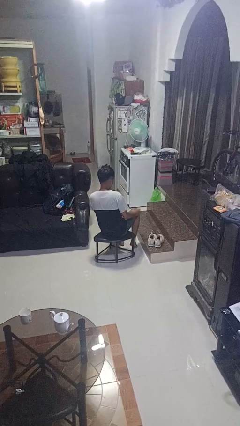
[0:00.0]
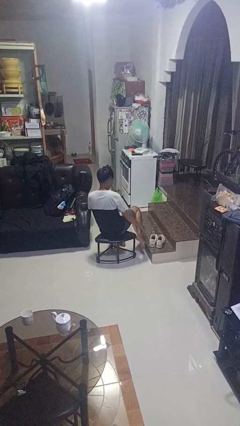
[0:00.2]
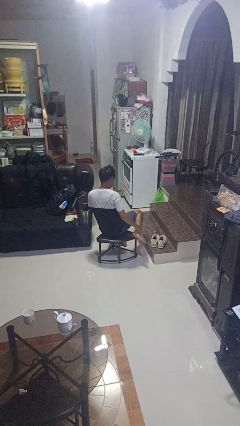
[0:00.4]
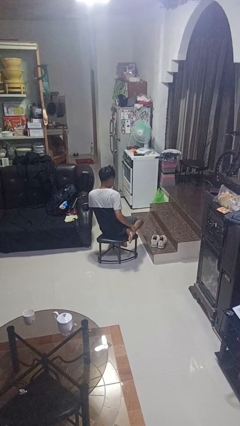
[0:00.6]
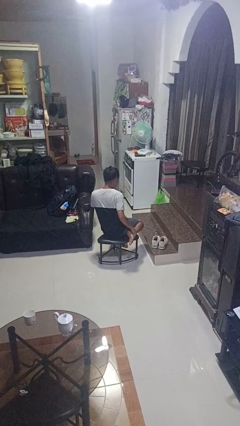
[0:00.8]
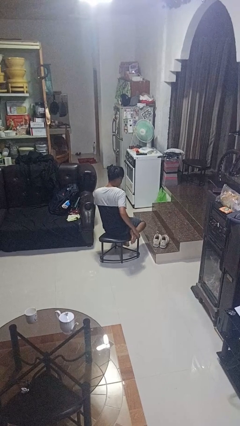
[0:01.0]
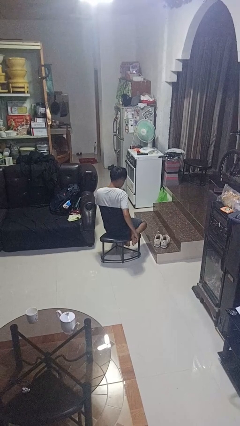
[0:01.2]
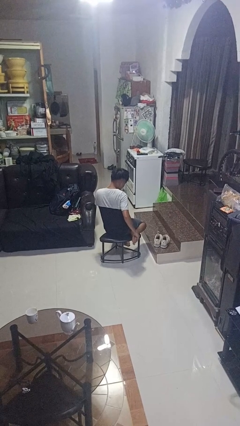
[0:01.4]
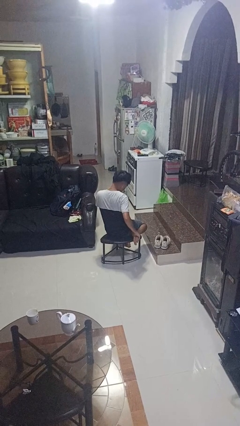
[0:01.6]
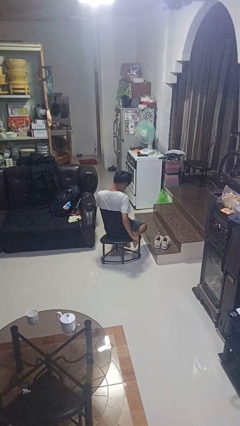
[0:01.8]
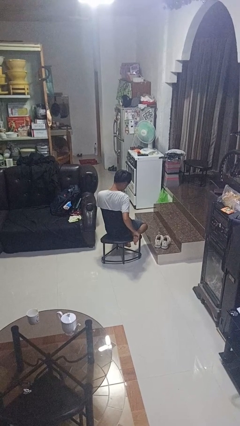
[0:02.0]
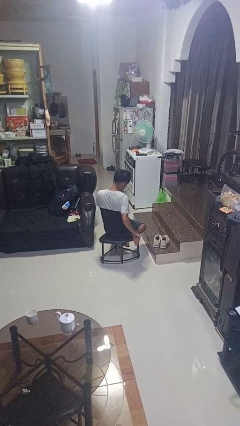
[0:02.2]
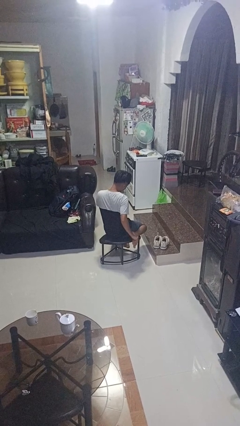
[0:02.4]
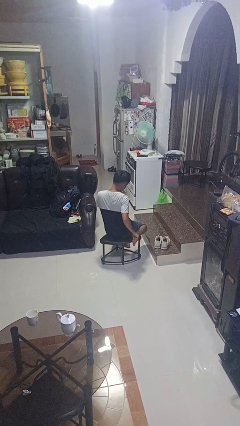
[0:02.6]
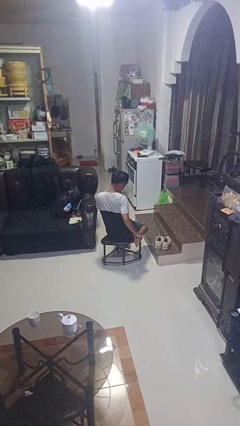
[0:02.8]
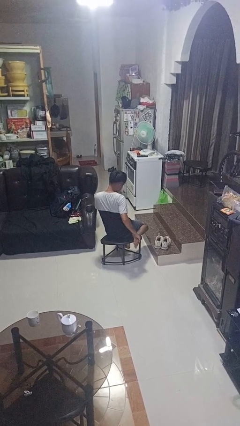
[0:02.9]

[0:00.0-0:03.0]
person rubs foot

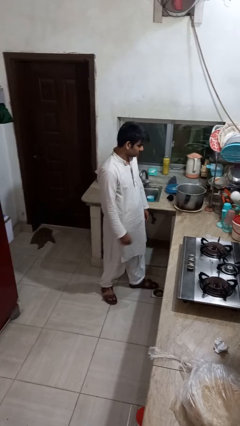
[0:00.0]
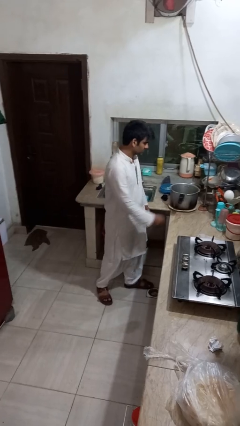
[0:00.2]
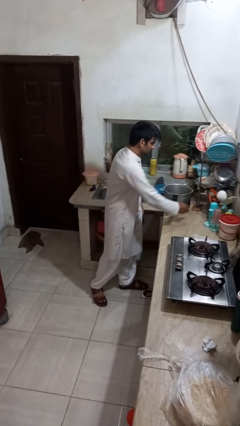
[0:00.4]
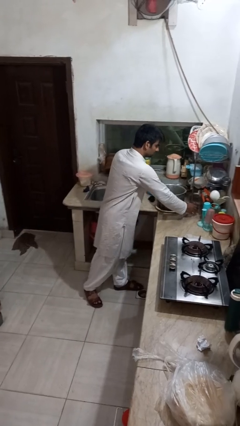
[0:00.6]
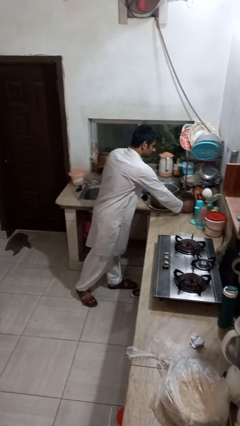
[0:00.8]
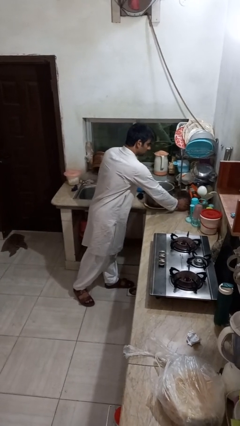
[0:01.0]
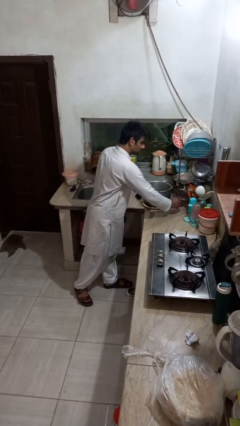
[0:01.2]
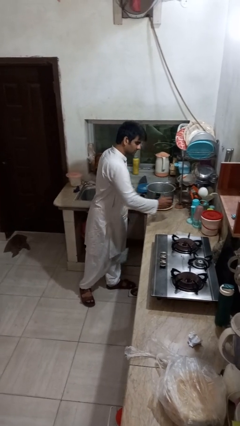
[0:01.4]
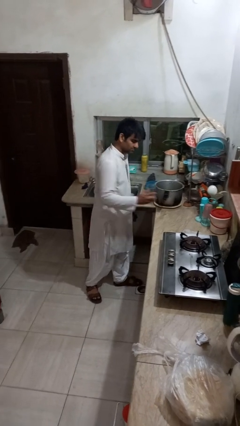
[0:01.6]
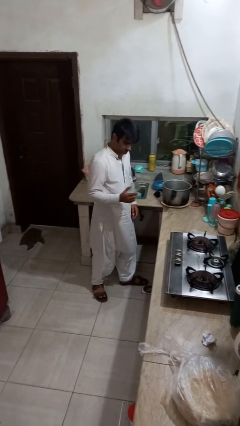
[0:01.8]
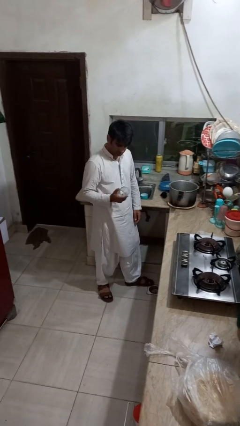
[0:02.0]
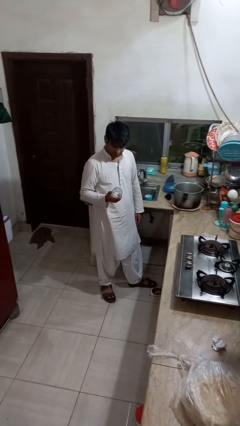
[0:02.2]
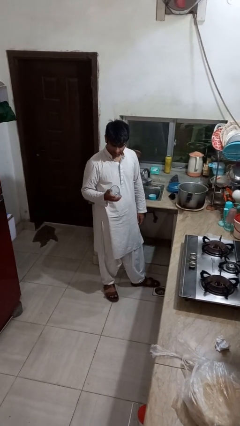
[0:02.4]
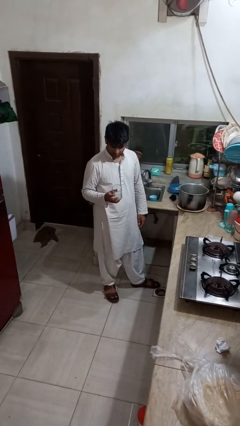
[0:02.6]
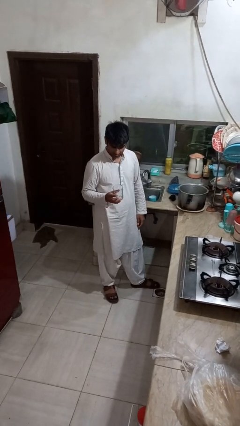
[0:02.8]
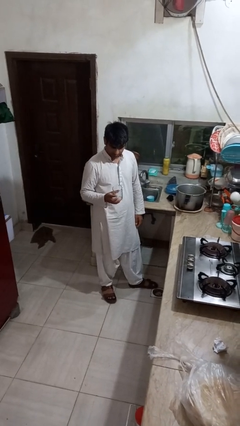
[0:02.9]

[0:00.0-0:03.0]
person picks up object from countertop

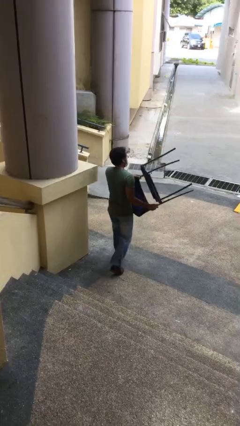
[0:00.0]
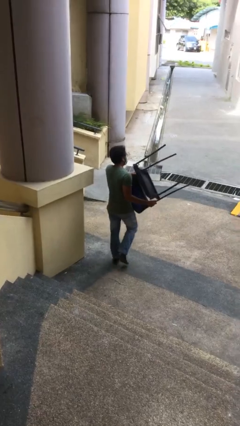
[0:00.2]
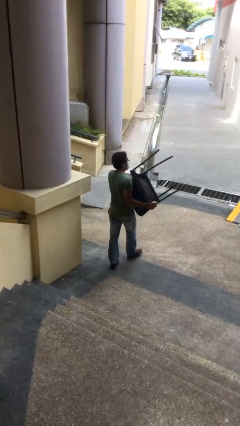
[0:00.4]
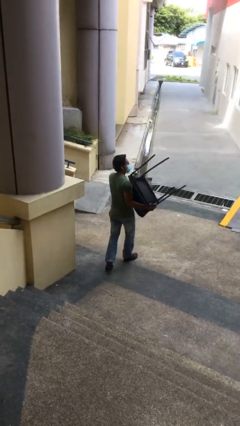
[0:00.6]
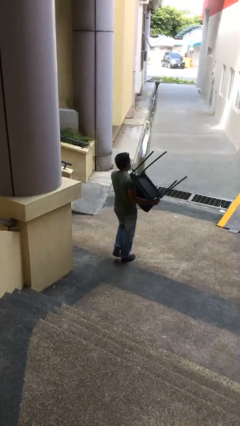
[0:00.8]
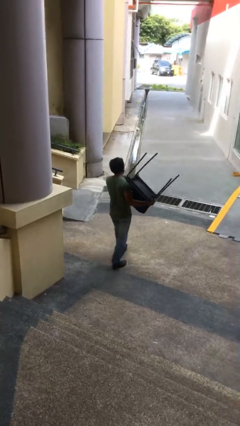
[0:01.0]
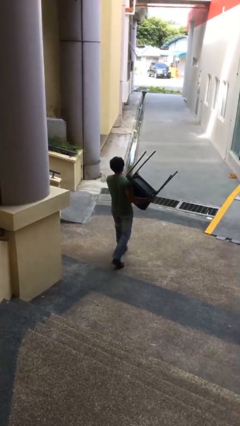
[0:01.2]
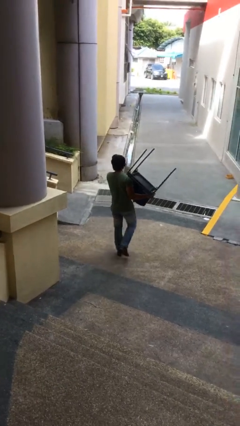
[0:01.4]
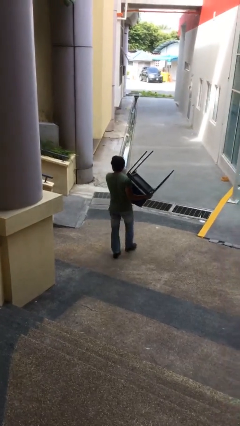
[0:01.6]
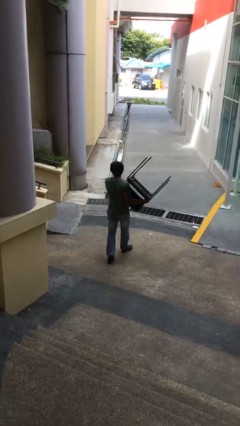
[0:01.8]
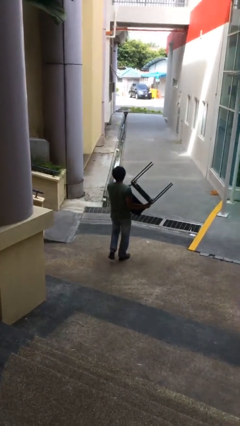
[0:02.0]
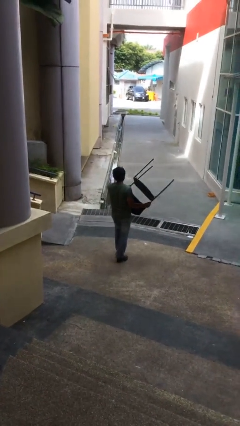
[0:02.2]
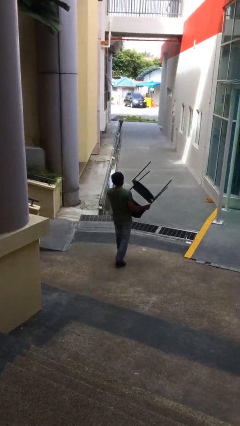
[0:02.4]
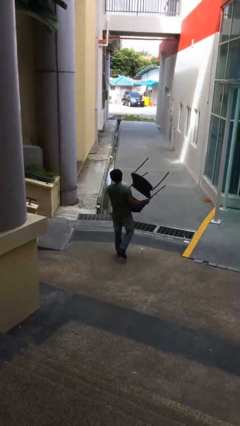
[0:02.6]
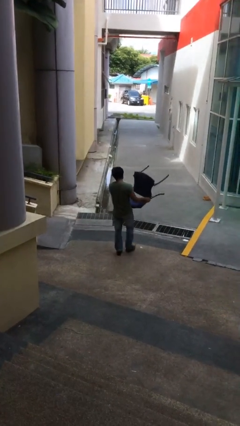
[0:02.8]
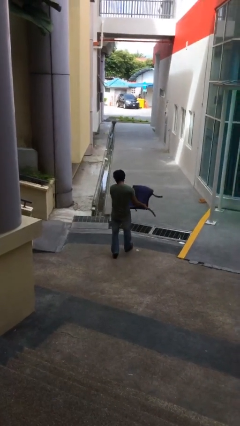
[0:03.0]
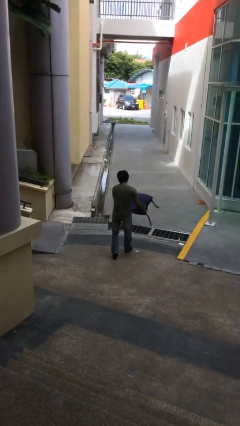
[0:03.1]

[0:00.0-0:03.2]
person carries heavy object

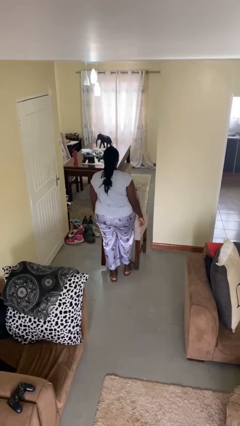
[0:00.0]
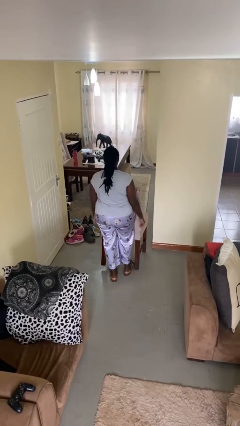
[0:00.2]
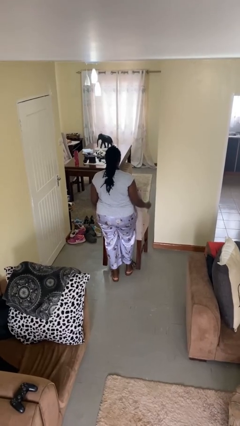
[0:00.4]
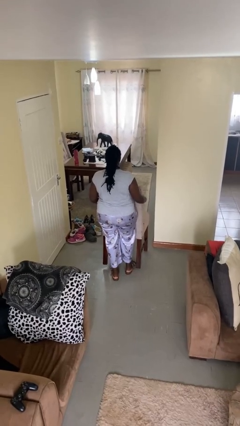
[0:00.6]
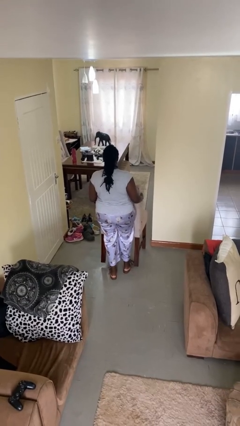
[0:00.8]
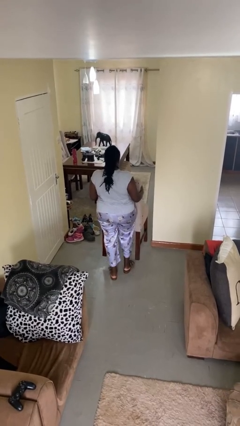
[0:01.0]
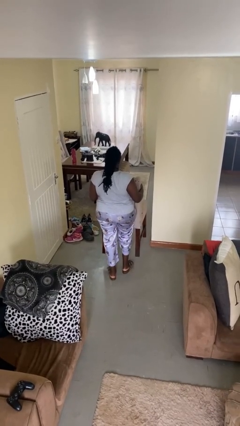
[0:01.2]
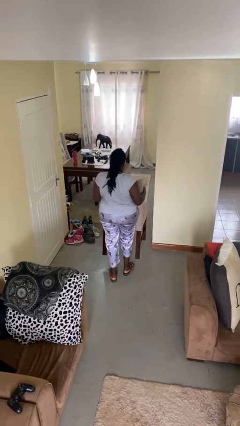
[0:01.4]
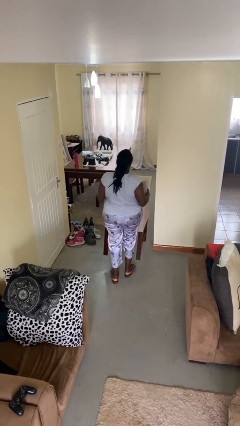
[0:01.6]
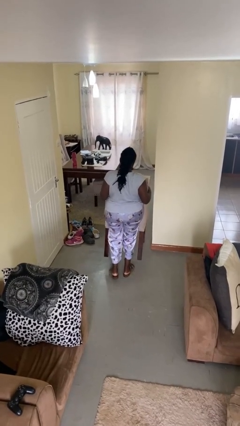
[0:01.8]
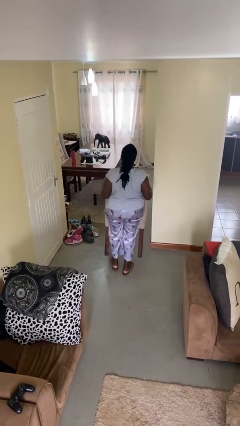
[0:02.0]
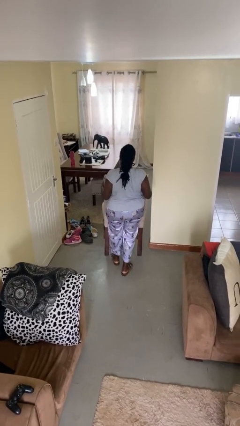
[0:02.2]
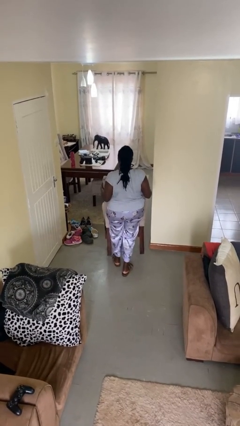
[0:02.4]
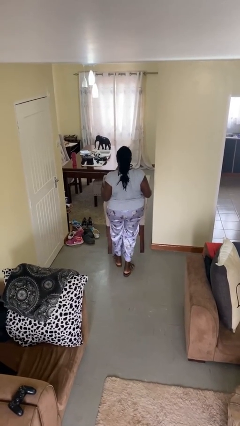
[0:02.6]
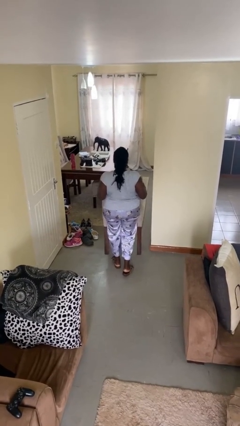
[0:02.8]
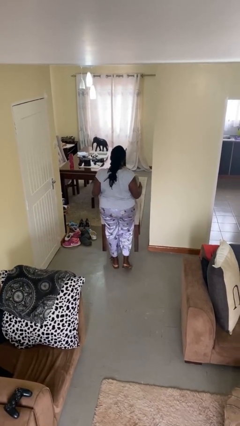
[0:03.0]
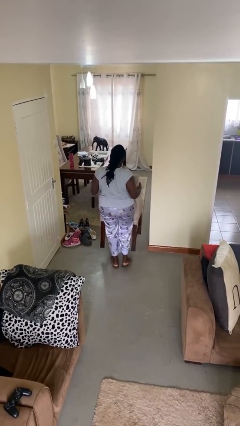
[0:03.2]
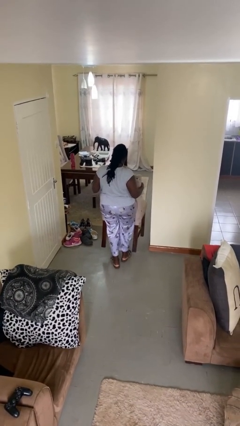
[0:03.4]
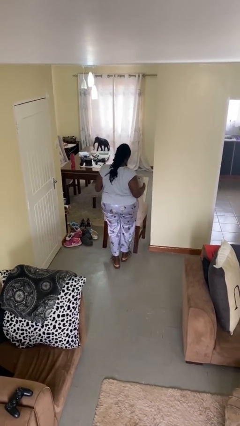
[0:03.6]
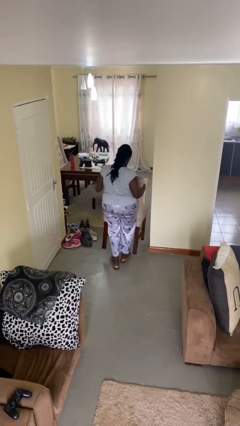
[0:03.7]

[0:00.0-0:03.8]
person carries furniture

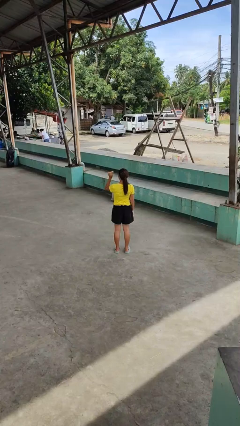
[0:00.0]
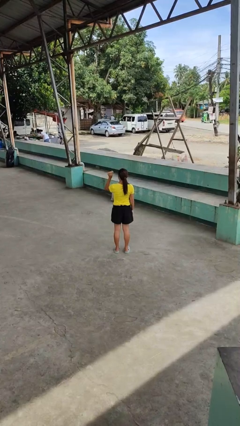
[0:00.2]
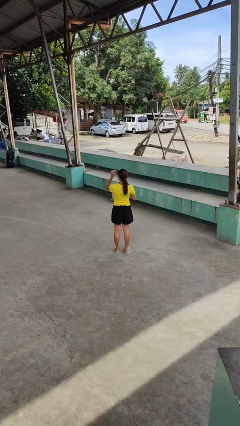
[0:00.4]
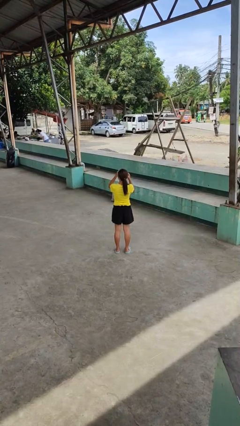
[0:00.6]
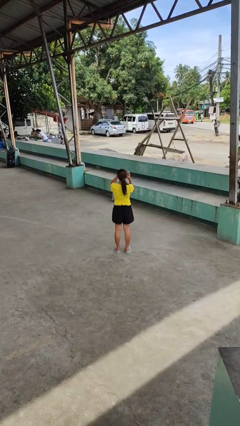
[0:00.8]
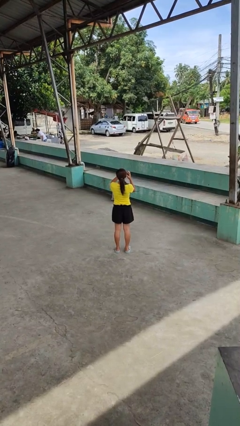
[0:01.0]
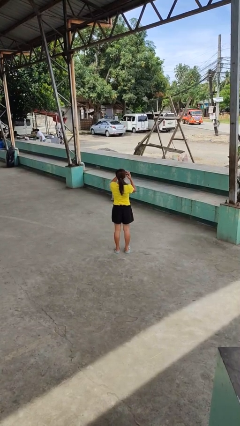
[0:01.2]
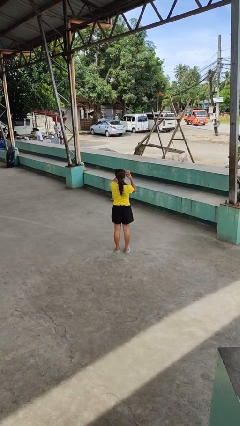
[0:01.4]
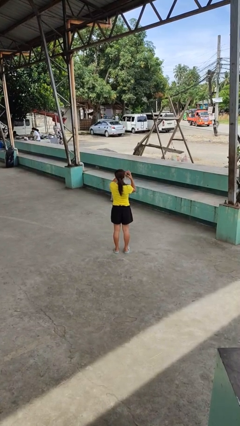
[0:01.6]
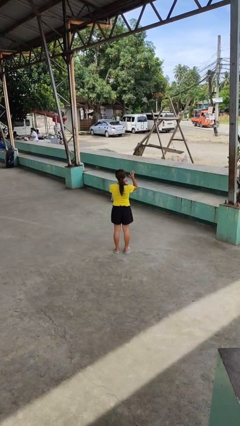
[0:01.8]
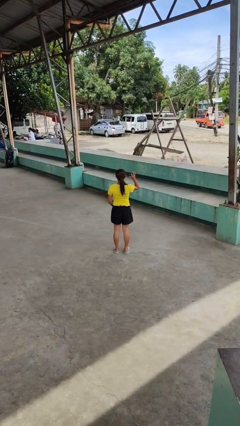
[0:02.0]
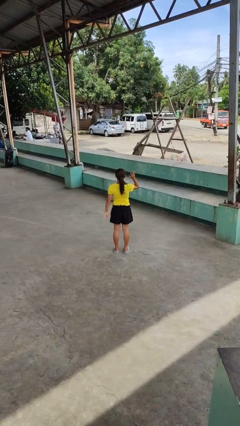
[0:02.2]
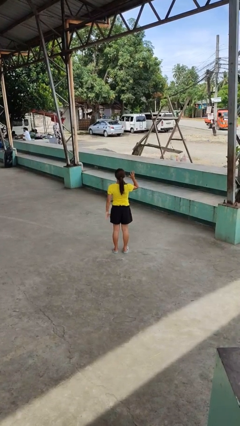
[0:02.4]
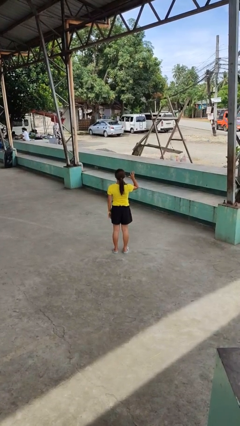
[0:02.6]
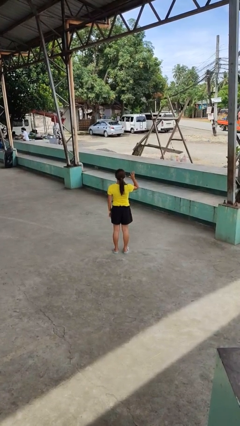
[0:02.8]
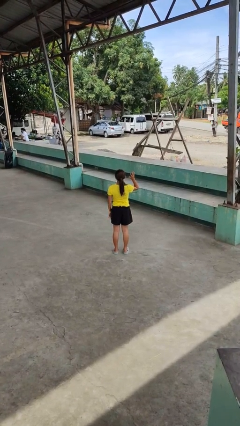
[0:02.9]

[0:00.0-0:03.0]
person puts on ring

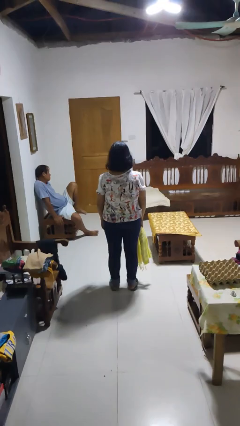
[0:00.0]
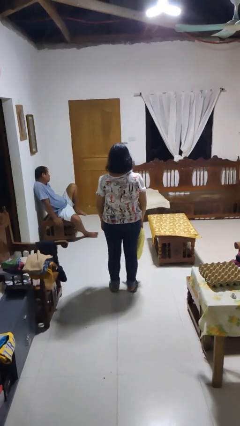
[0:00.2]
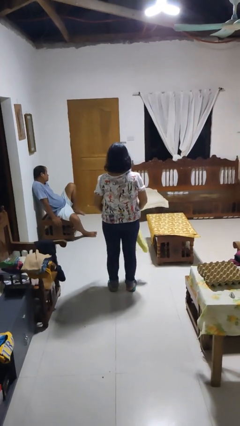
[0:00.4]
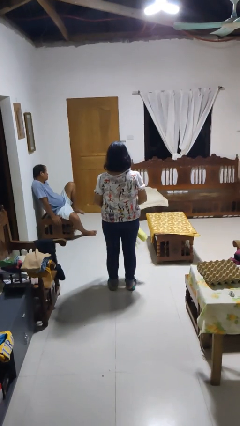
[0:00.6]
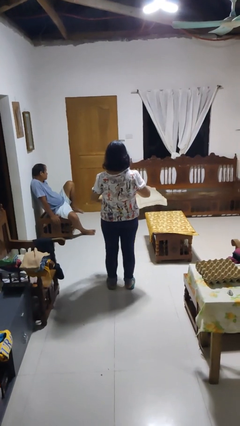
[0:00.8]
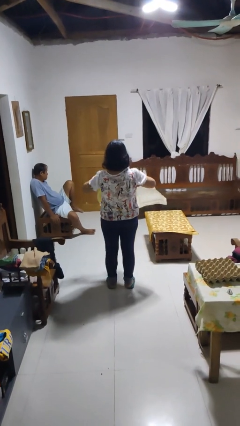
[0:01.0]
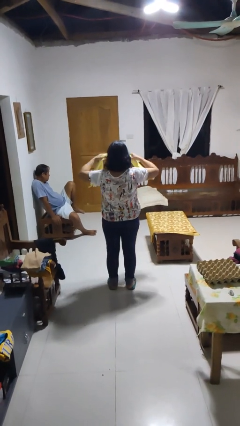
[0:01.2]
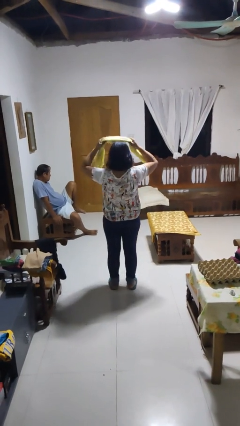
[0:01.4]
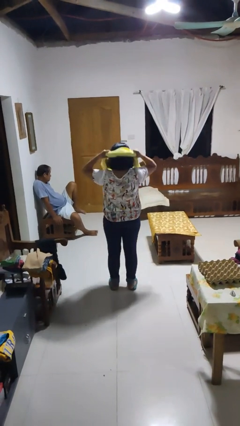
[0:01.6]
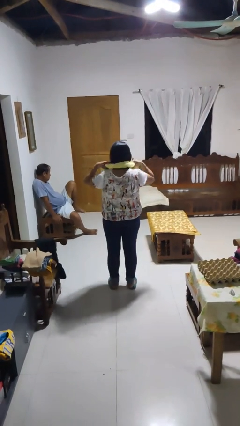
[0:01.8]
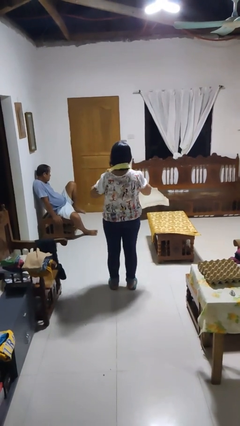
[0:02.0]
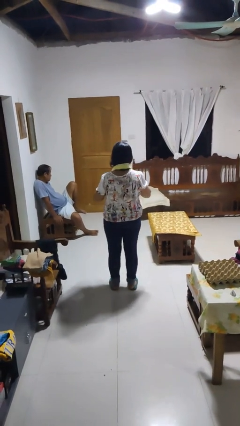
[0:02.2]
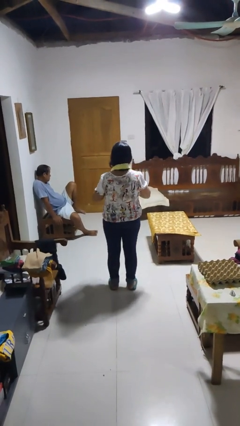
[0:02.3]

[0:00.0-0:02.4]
person puts on scarf
